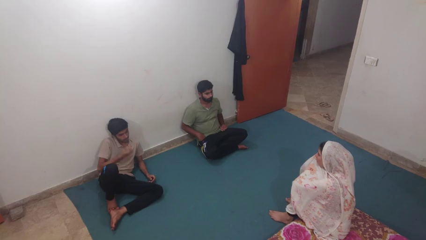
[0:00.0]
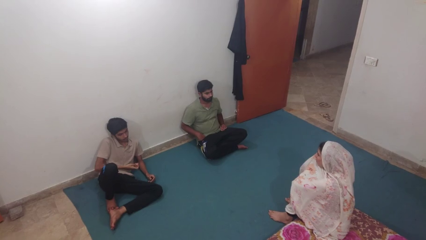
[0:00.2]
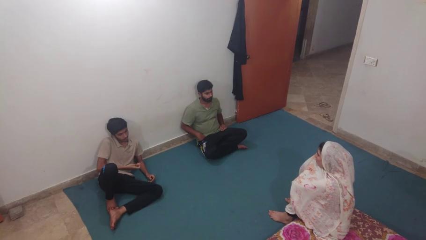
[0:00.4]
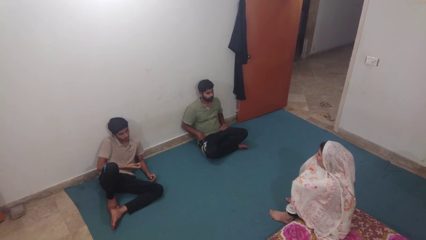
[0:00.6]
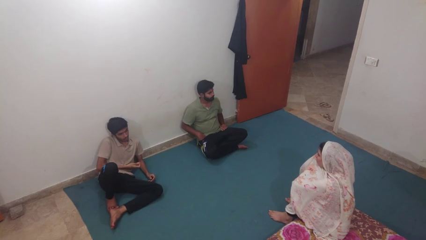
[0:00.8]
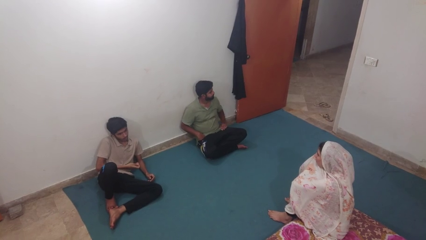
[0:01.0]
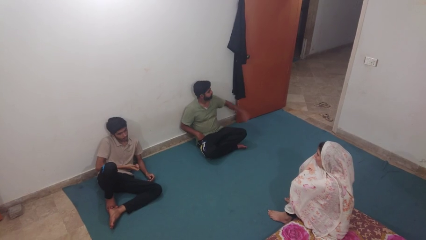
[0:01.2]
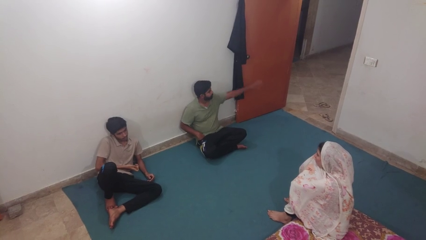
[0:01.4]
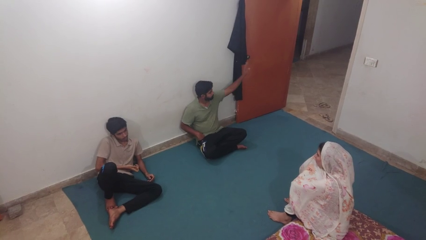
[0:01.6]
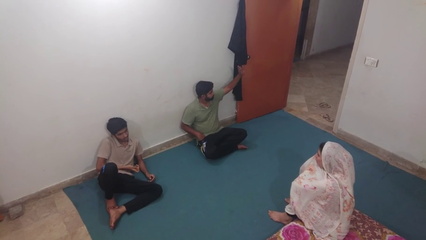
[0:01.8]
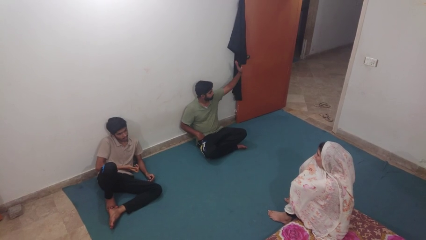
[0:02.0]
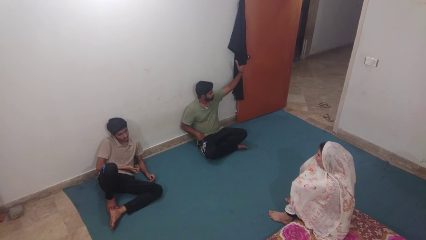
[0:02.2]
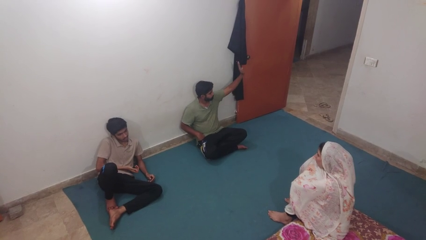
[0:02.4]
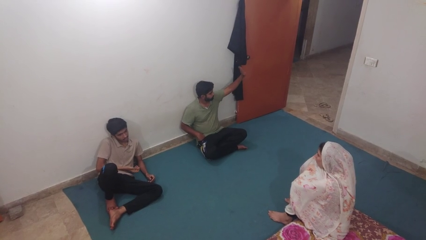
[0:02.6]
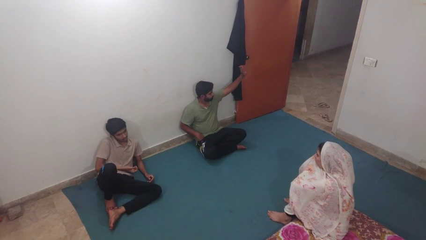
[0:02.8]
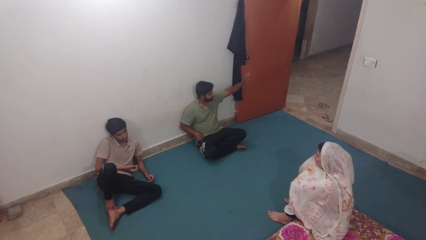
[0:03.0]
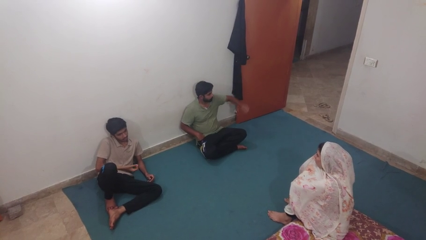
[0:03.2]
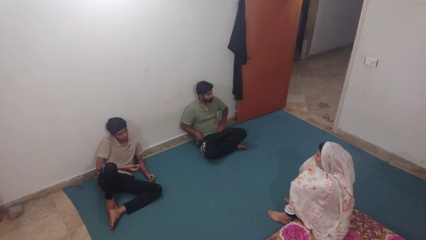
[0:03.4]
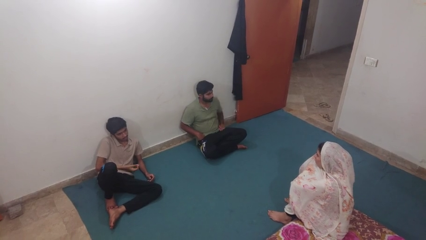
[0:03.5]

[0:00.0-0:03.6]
person waves at person

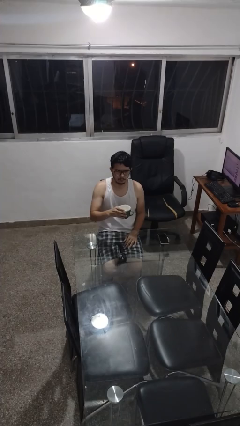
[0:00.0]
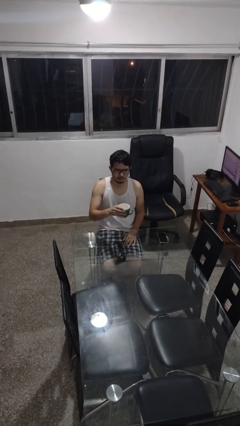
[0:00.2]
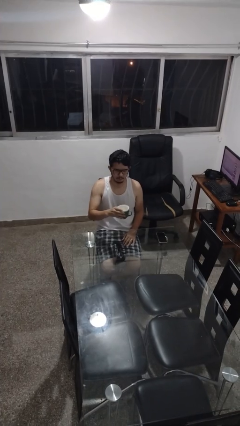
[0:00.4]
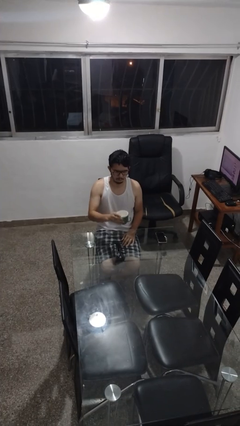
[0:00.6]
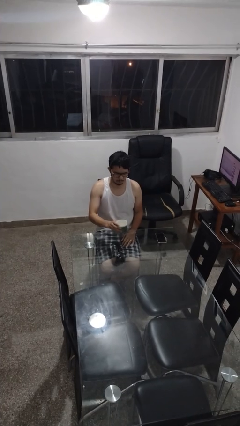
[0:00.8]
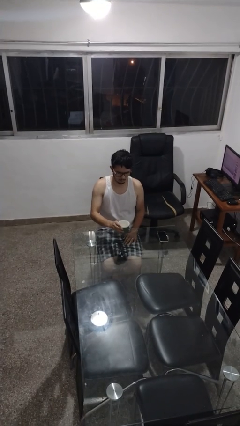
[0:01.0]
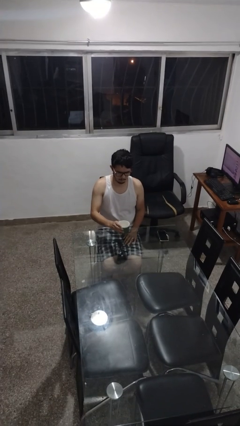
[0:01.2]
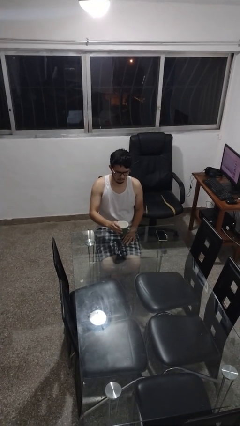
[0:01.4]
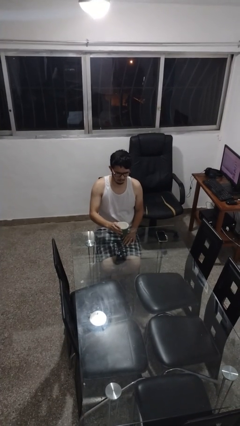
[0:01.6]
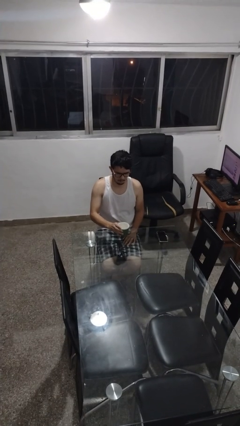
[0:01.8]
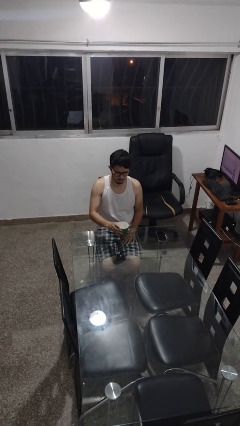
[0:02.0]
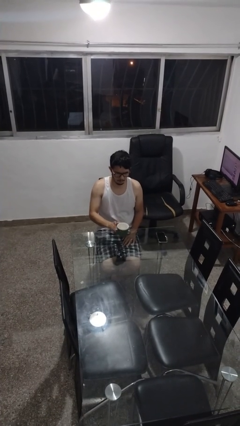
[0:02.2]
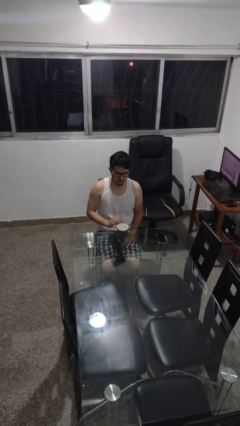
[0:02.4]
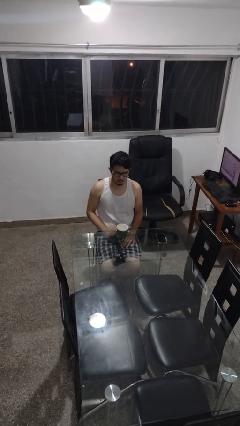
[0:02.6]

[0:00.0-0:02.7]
person puts down object on table

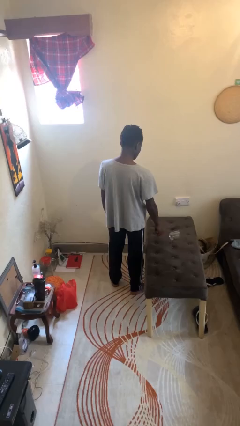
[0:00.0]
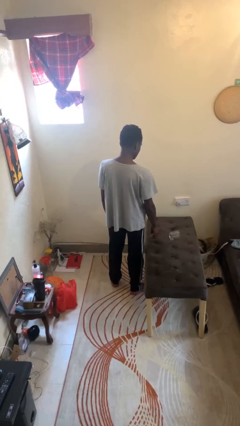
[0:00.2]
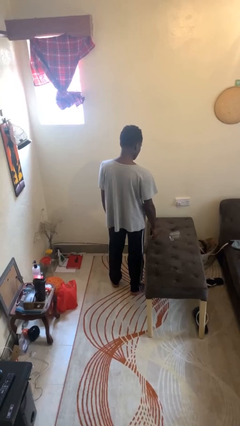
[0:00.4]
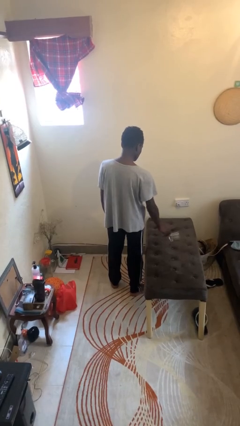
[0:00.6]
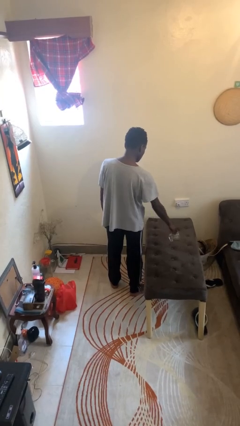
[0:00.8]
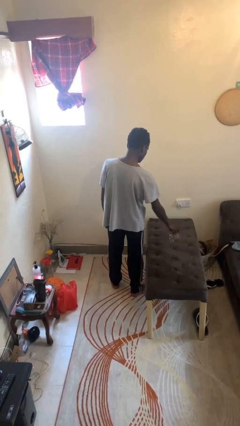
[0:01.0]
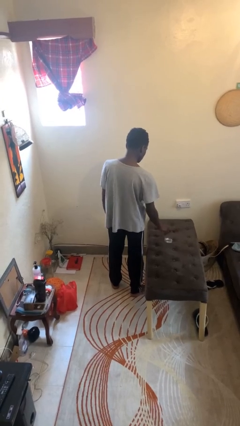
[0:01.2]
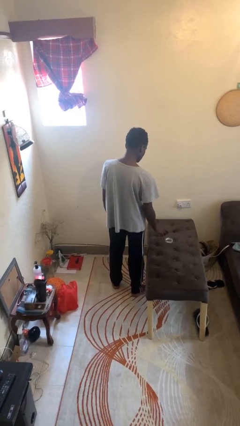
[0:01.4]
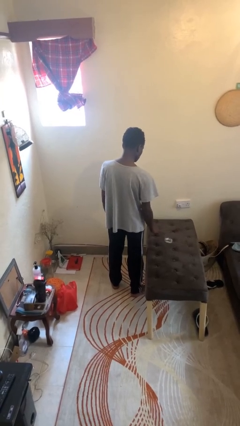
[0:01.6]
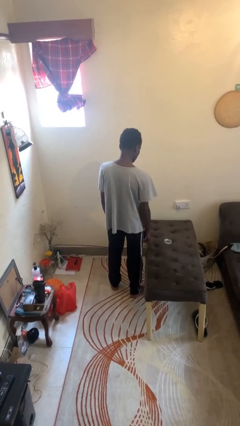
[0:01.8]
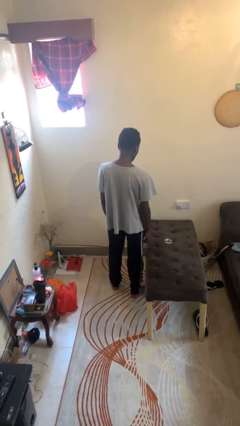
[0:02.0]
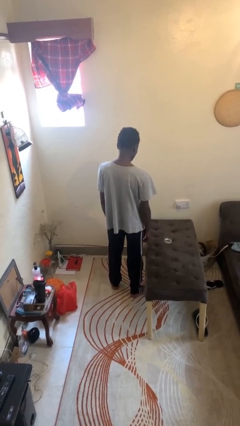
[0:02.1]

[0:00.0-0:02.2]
person sets upright glass

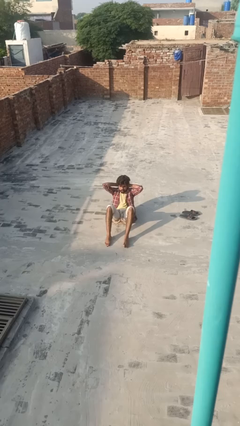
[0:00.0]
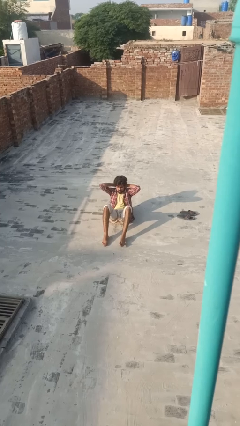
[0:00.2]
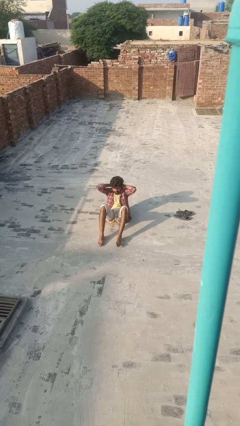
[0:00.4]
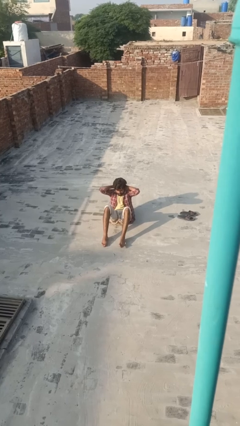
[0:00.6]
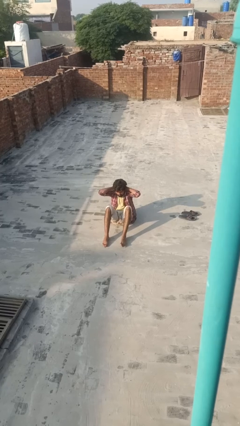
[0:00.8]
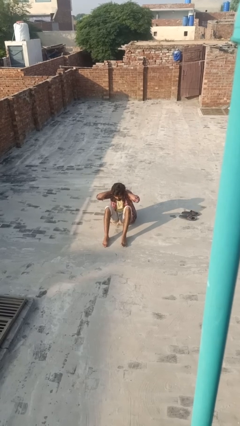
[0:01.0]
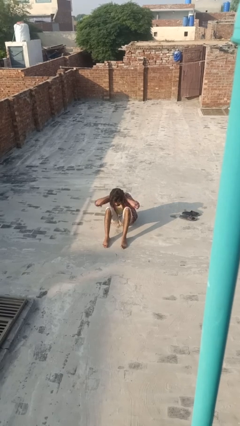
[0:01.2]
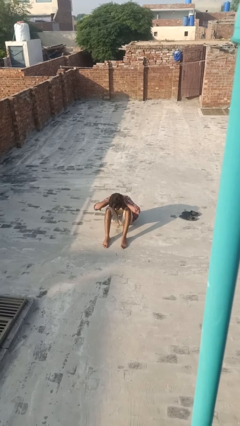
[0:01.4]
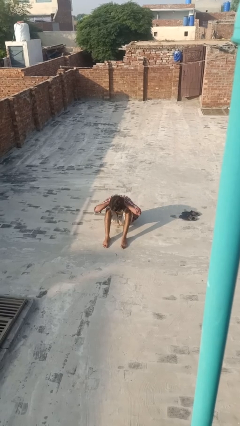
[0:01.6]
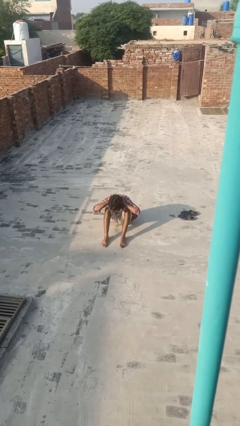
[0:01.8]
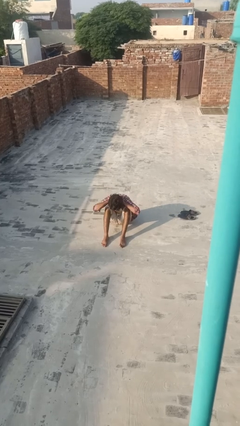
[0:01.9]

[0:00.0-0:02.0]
person exercises with situp

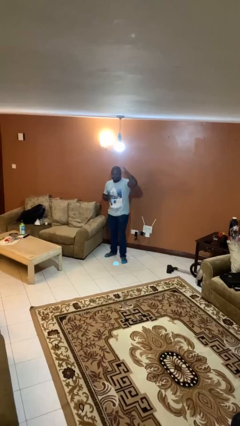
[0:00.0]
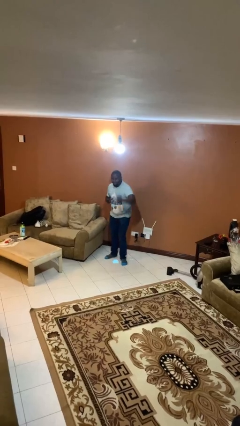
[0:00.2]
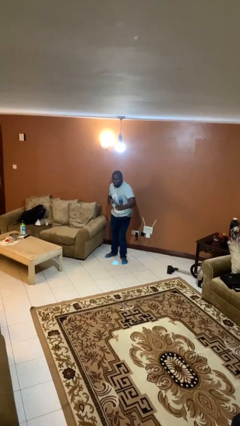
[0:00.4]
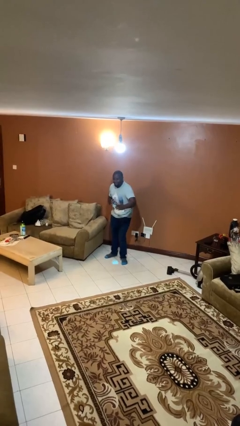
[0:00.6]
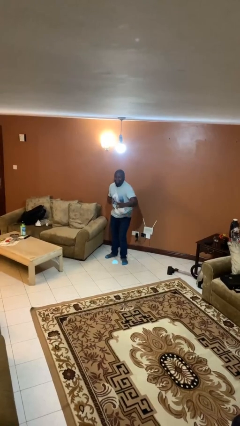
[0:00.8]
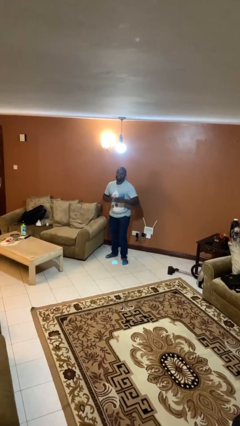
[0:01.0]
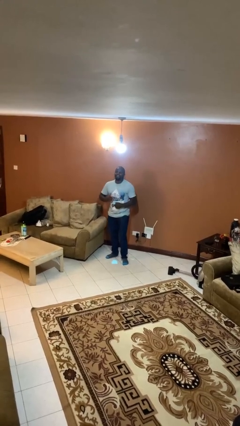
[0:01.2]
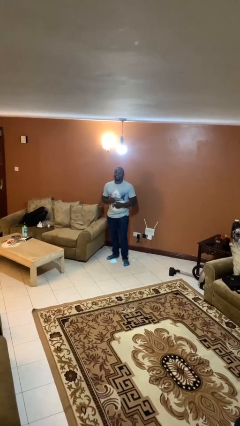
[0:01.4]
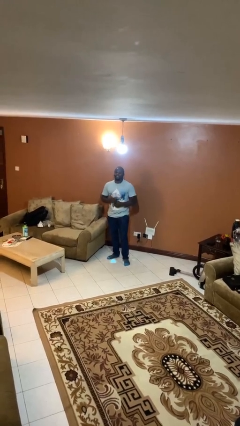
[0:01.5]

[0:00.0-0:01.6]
person karate chop

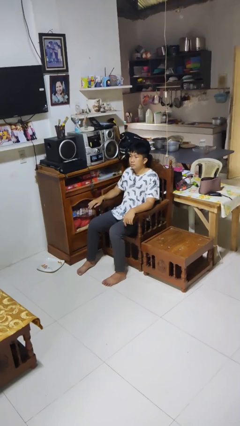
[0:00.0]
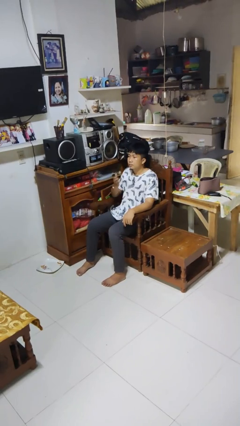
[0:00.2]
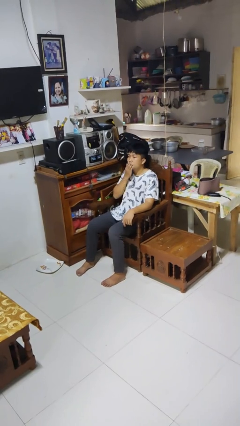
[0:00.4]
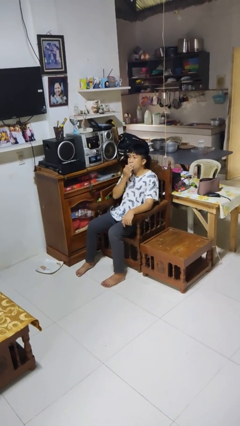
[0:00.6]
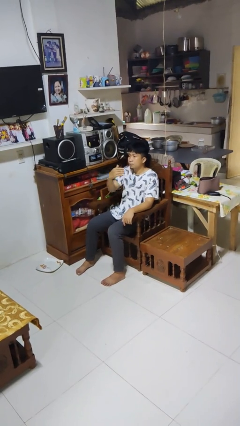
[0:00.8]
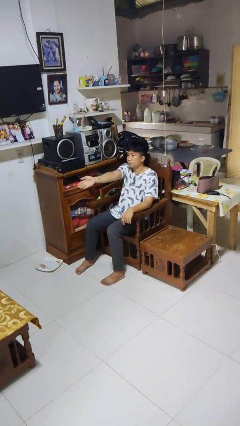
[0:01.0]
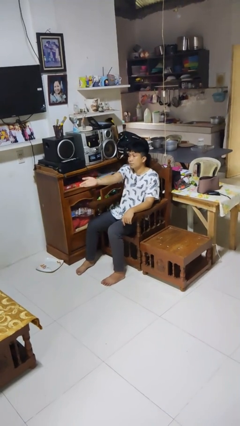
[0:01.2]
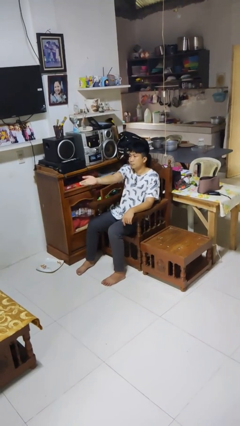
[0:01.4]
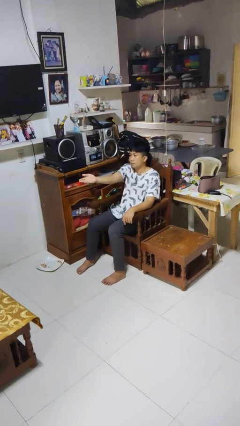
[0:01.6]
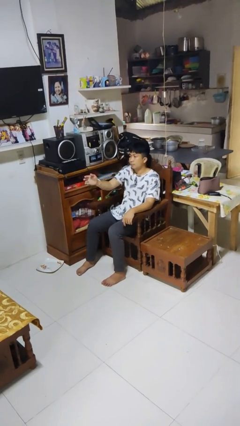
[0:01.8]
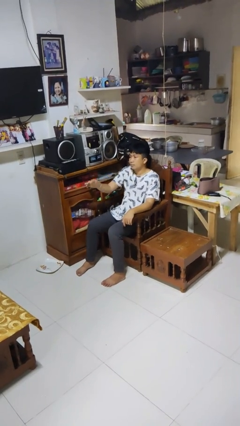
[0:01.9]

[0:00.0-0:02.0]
person gestures blow kiss

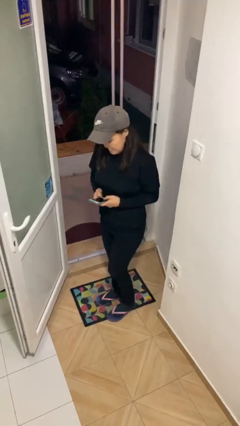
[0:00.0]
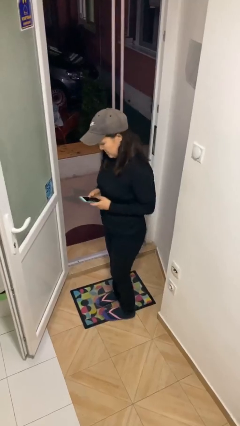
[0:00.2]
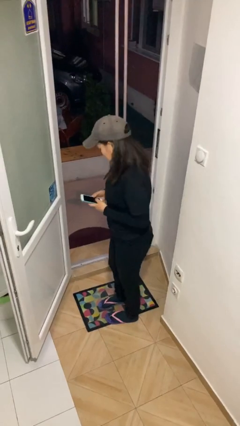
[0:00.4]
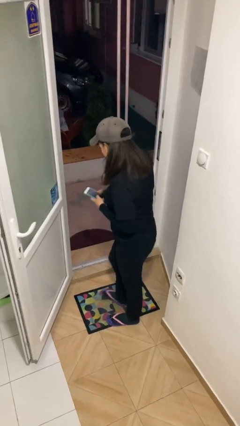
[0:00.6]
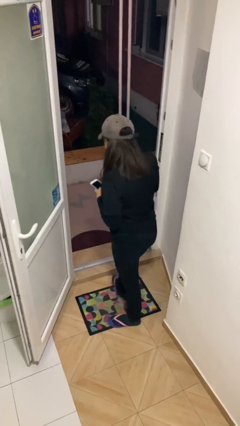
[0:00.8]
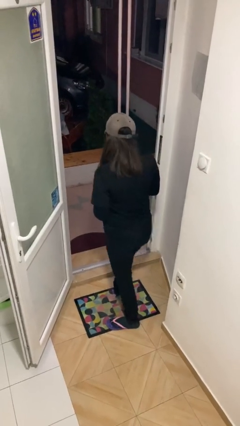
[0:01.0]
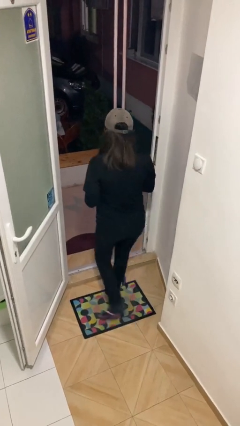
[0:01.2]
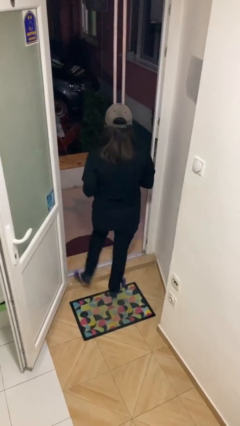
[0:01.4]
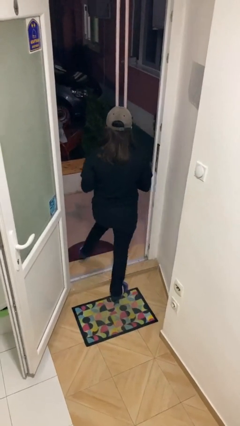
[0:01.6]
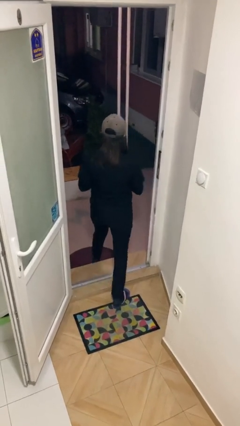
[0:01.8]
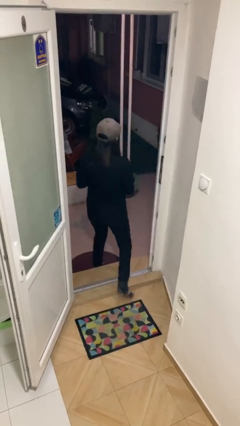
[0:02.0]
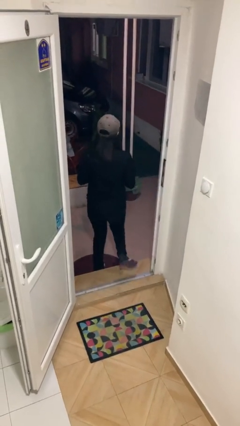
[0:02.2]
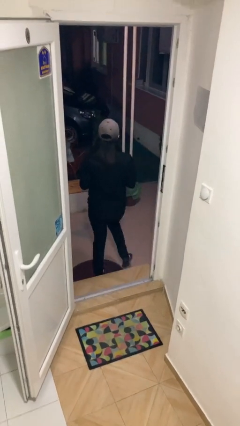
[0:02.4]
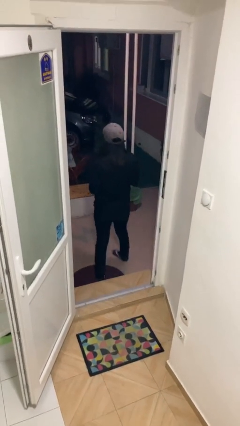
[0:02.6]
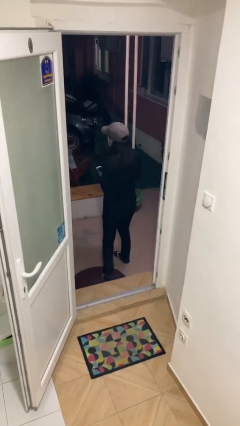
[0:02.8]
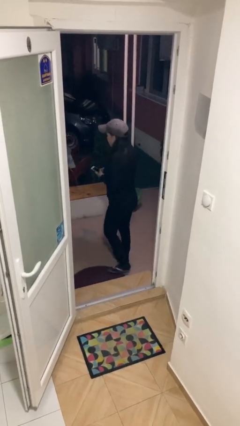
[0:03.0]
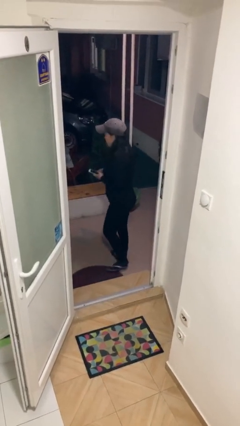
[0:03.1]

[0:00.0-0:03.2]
person exits scene through structure

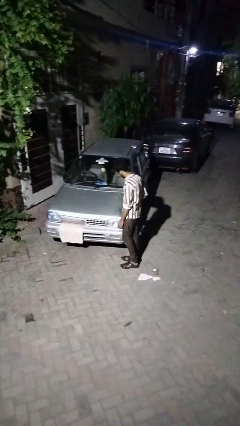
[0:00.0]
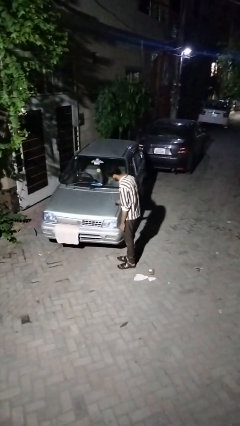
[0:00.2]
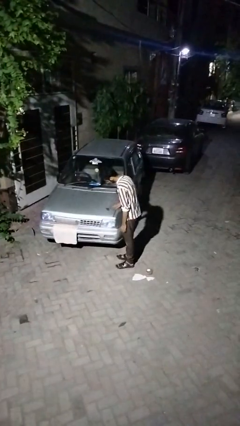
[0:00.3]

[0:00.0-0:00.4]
person polishes car with rag
